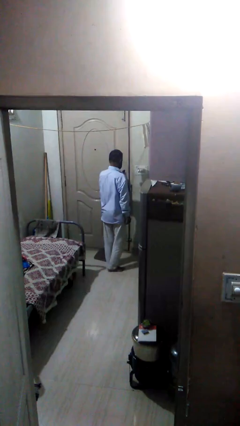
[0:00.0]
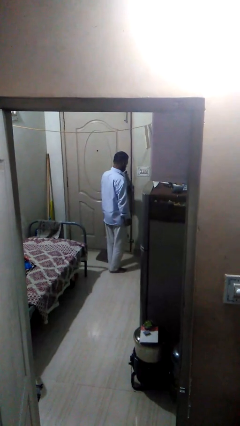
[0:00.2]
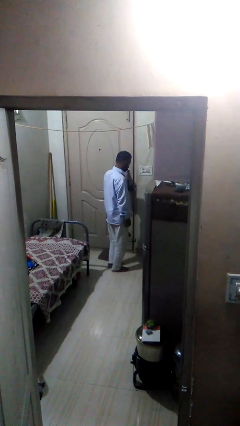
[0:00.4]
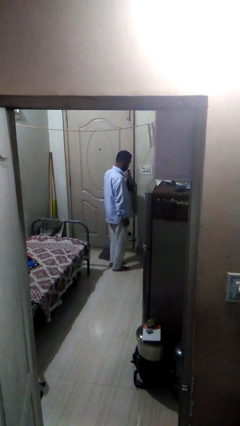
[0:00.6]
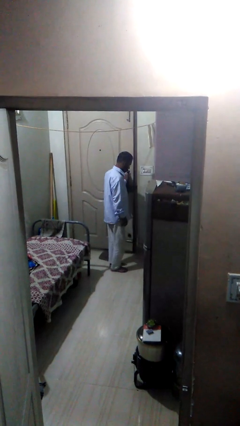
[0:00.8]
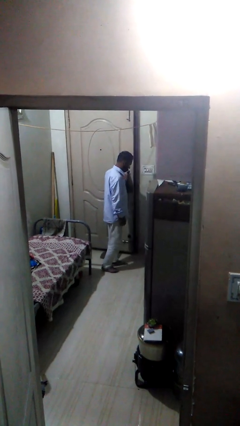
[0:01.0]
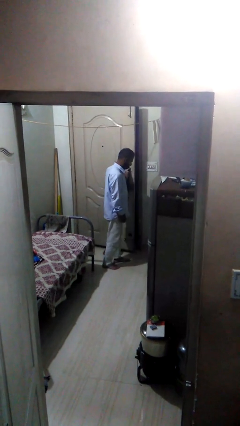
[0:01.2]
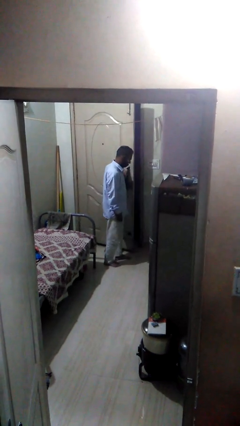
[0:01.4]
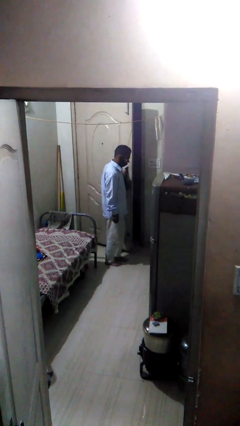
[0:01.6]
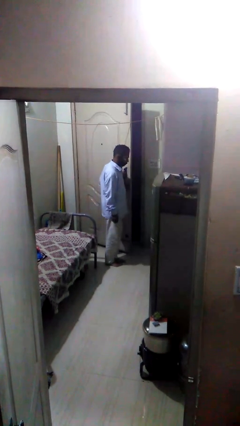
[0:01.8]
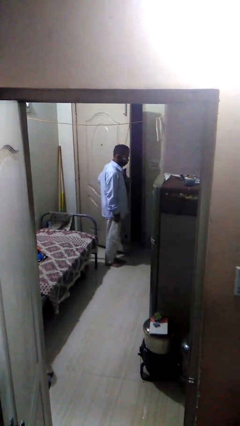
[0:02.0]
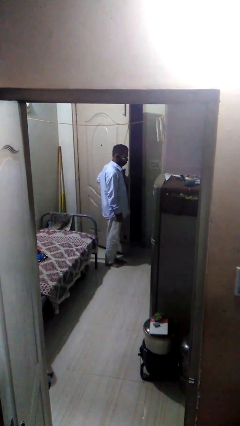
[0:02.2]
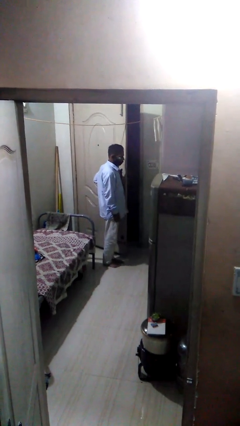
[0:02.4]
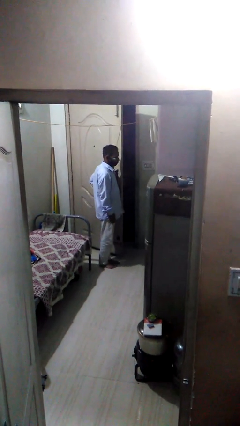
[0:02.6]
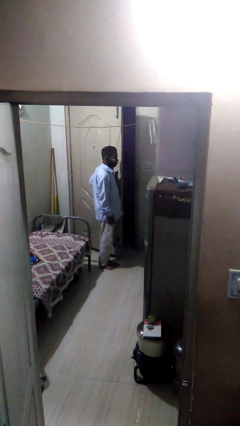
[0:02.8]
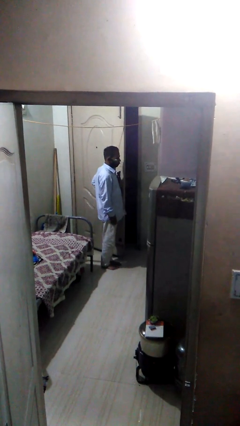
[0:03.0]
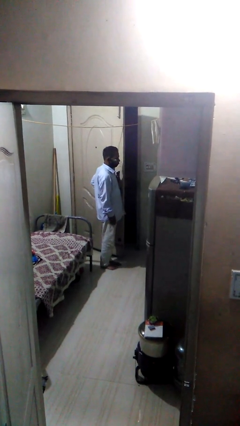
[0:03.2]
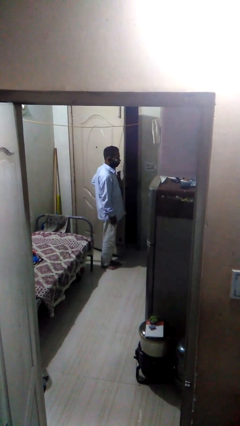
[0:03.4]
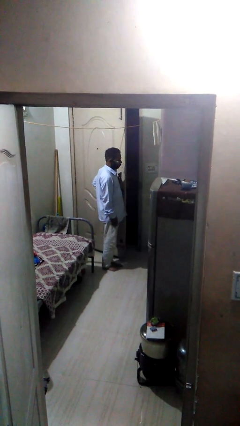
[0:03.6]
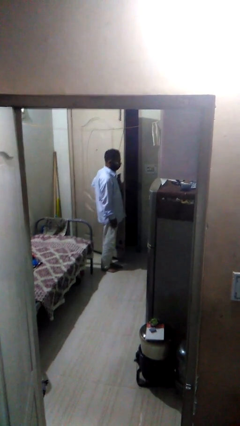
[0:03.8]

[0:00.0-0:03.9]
person opens facility door

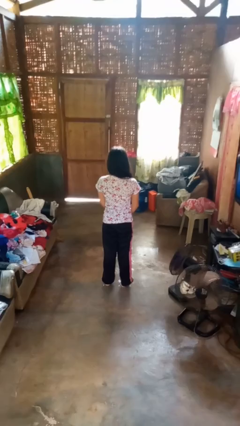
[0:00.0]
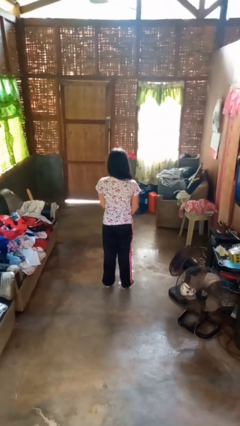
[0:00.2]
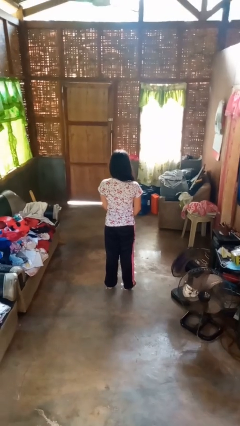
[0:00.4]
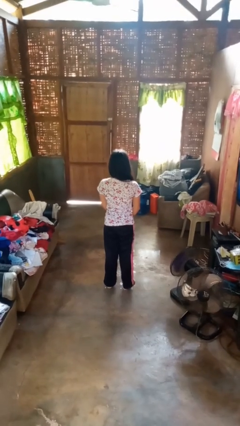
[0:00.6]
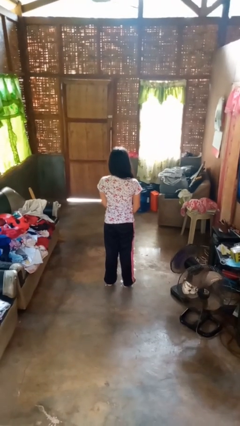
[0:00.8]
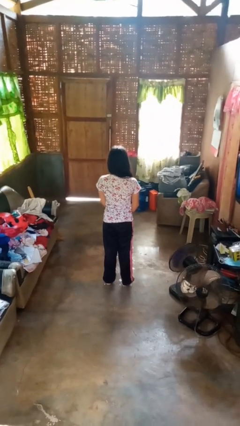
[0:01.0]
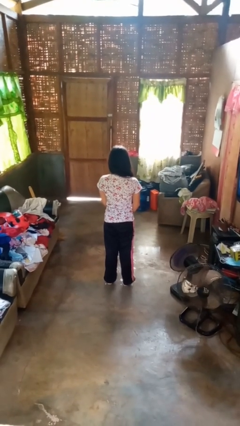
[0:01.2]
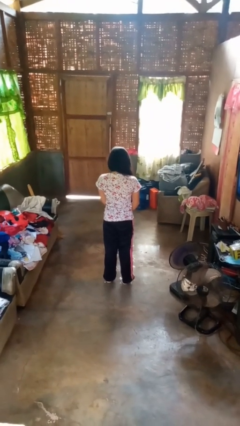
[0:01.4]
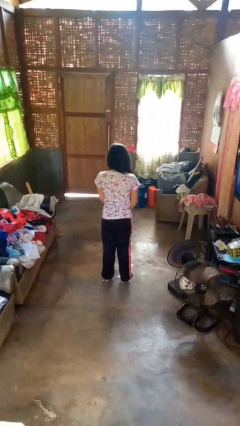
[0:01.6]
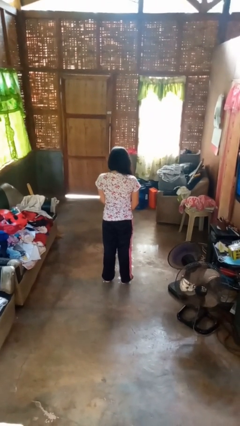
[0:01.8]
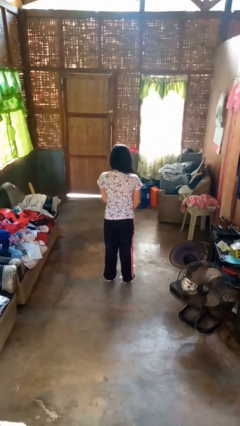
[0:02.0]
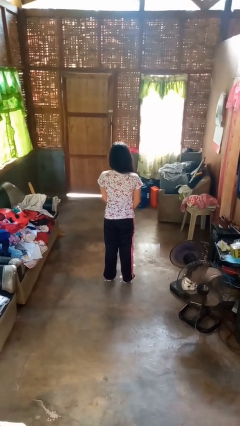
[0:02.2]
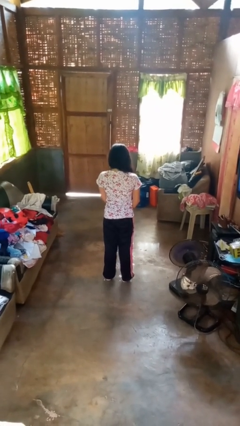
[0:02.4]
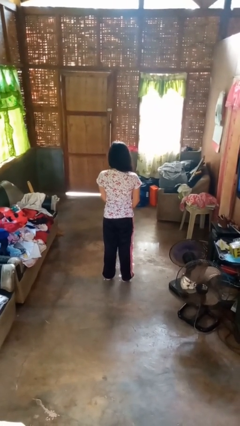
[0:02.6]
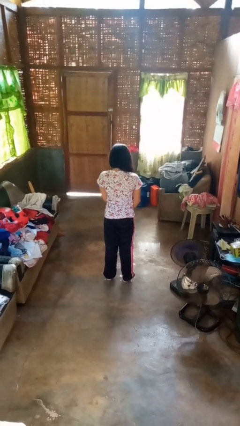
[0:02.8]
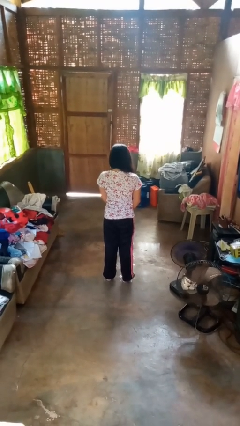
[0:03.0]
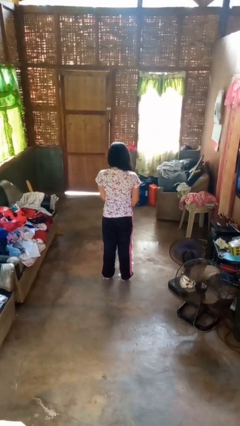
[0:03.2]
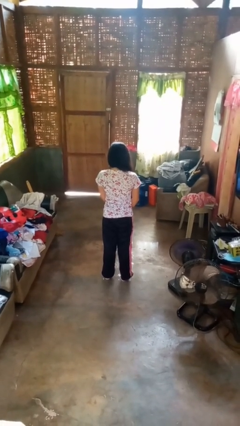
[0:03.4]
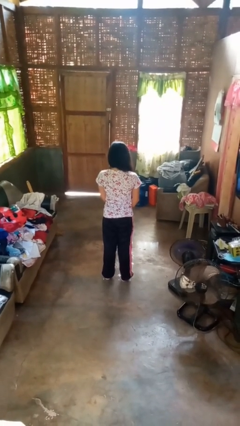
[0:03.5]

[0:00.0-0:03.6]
person nods head

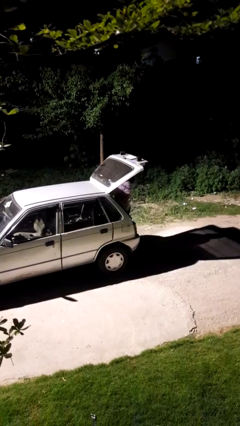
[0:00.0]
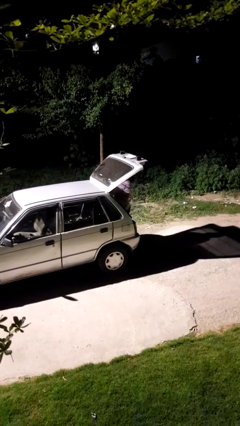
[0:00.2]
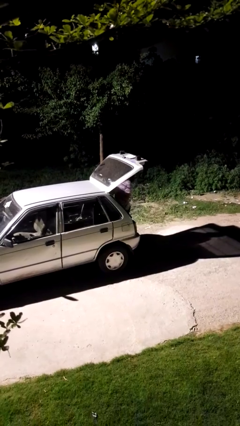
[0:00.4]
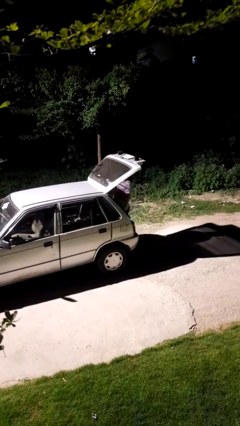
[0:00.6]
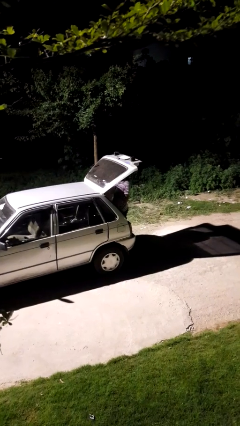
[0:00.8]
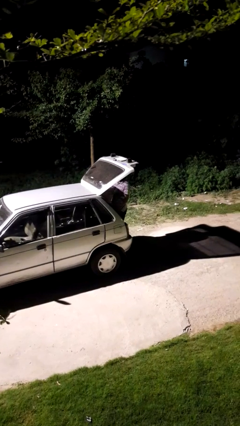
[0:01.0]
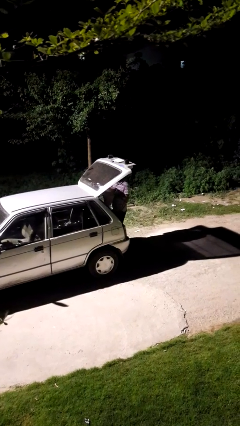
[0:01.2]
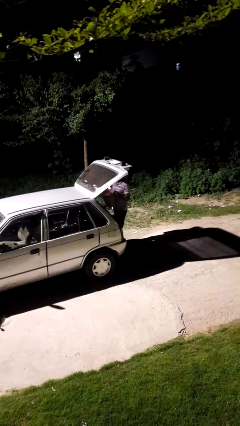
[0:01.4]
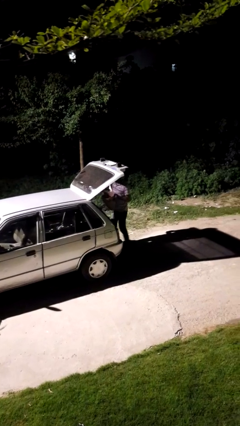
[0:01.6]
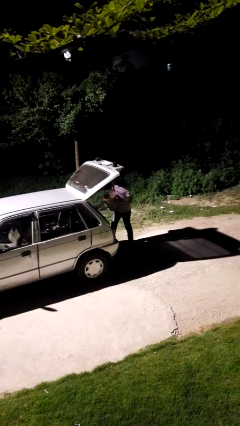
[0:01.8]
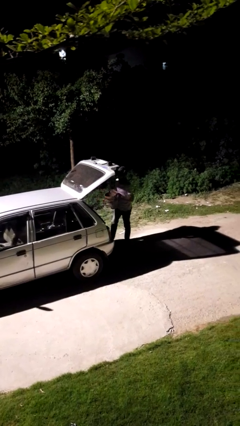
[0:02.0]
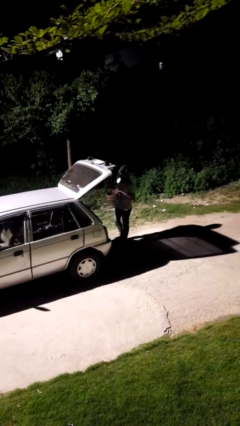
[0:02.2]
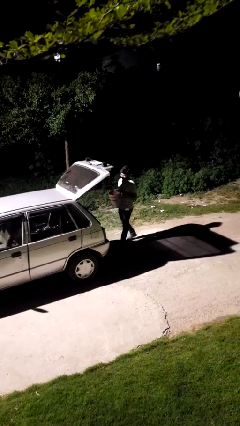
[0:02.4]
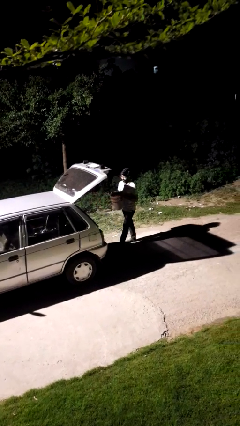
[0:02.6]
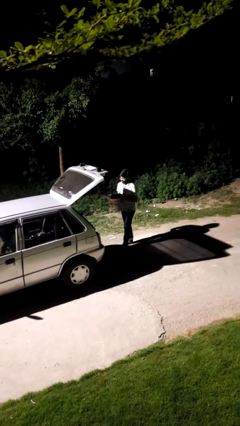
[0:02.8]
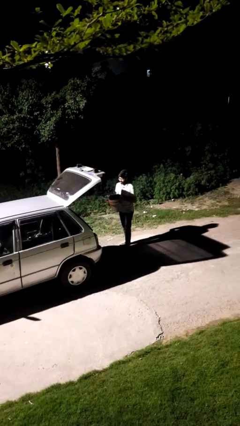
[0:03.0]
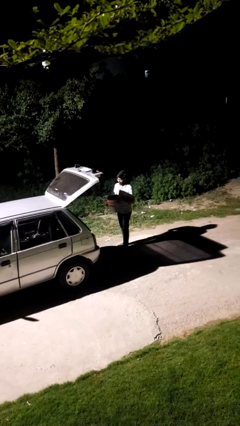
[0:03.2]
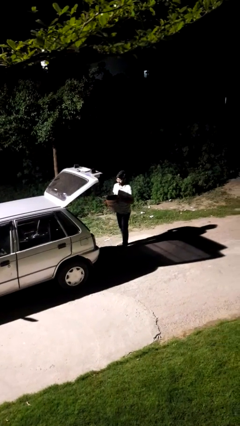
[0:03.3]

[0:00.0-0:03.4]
person unloads car

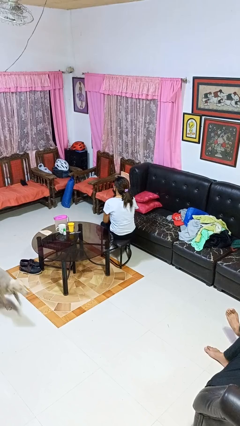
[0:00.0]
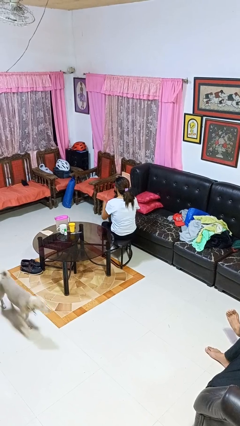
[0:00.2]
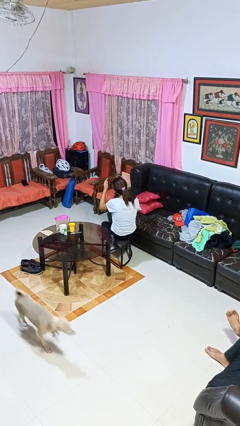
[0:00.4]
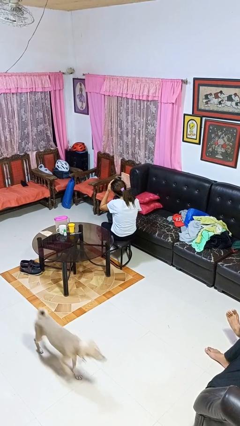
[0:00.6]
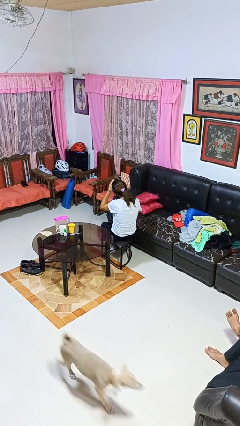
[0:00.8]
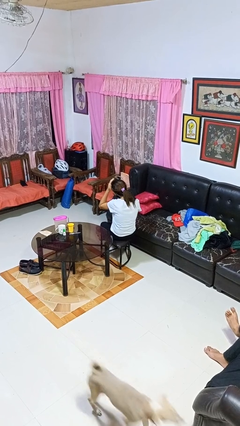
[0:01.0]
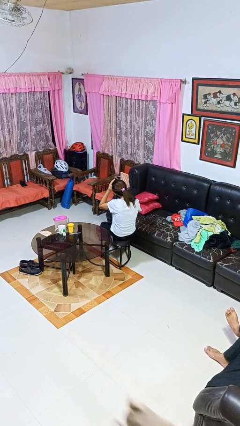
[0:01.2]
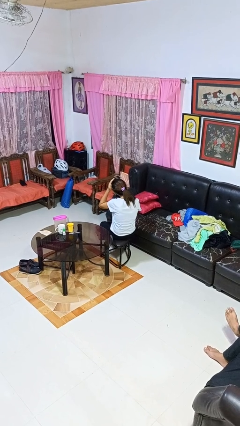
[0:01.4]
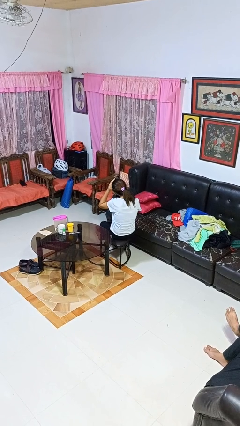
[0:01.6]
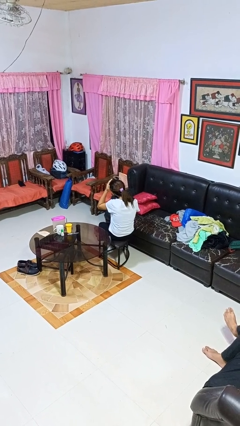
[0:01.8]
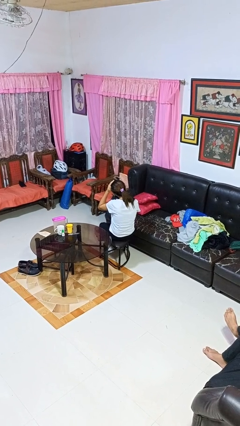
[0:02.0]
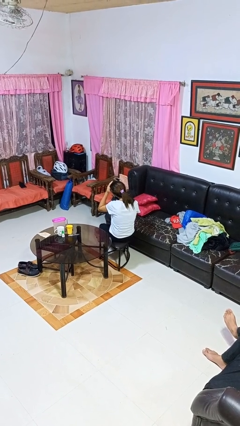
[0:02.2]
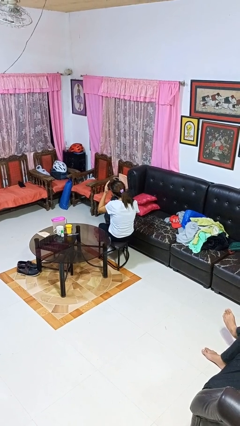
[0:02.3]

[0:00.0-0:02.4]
person pats head

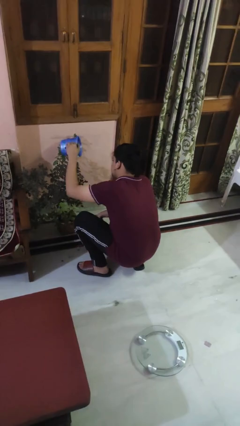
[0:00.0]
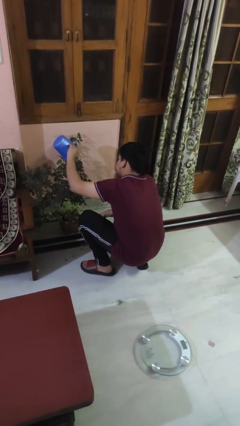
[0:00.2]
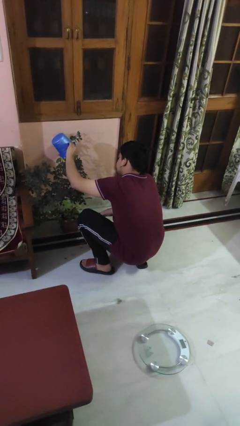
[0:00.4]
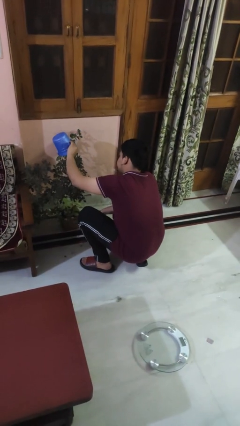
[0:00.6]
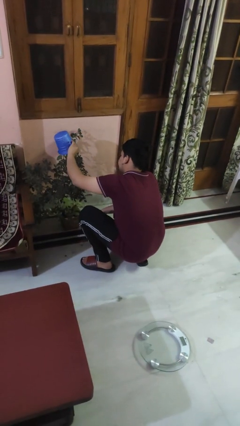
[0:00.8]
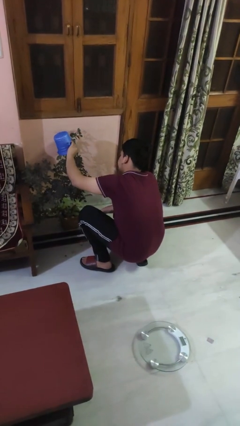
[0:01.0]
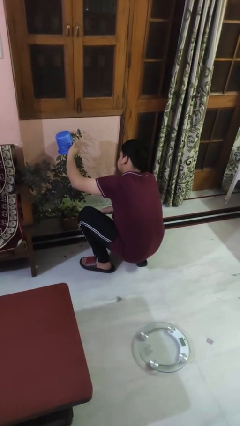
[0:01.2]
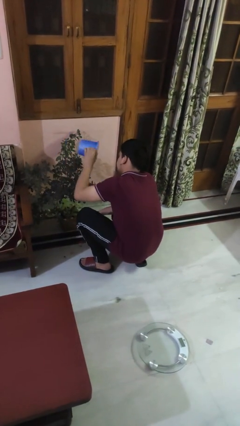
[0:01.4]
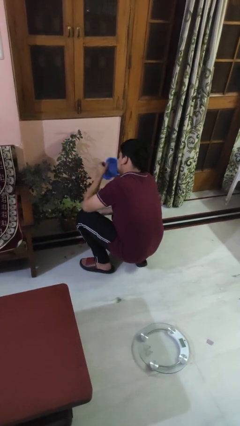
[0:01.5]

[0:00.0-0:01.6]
person waters houseplant

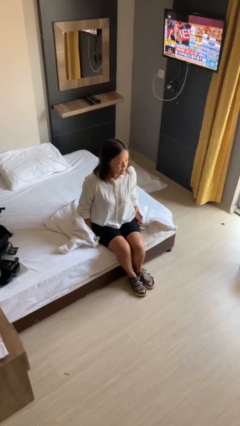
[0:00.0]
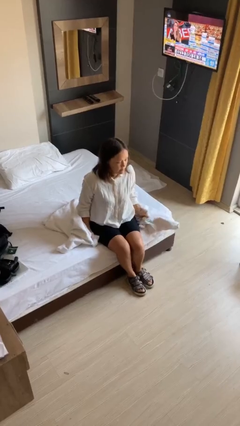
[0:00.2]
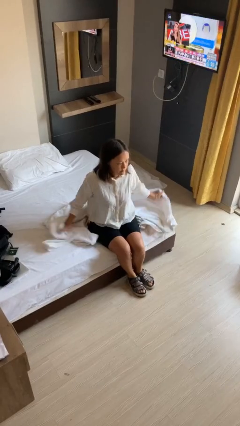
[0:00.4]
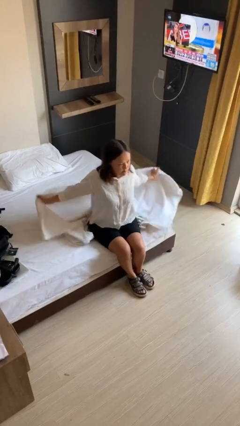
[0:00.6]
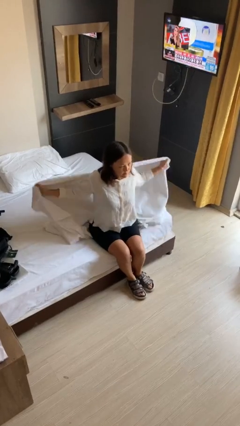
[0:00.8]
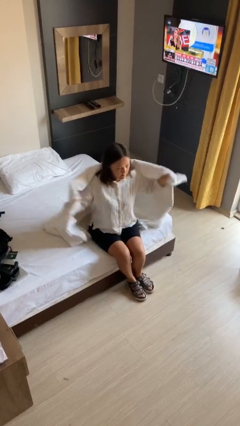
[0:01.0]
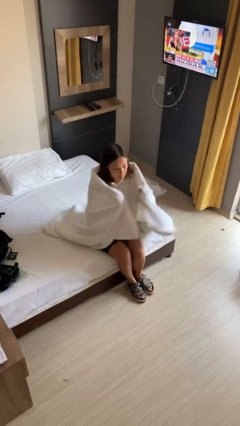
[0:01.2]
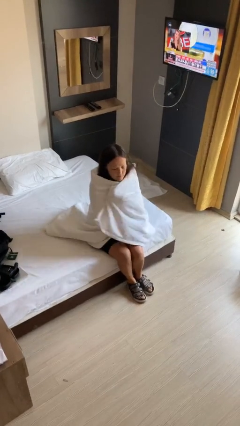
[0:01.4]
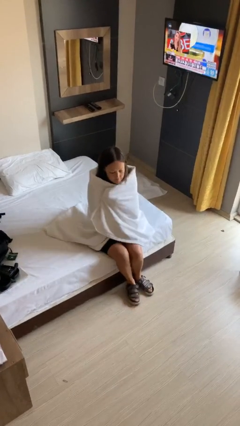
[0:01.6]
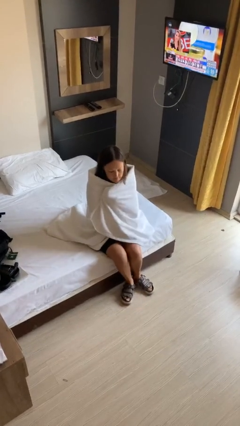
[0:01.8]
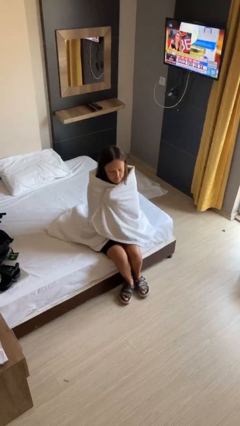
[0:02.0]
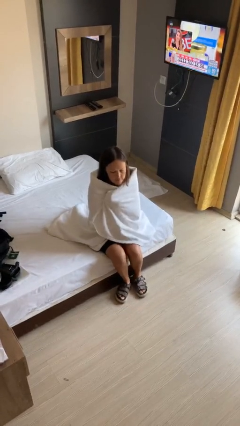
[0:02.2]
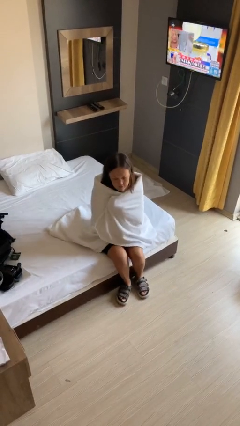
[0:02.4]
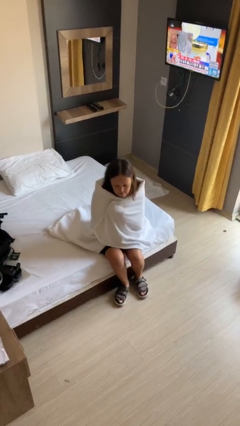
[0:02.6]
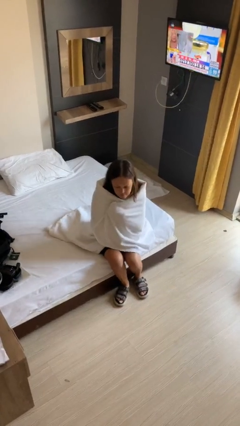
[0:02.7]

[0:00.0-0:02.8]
person covers with blanket
